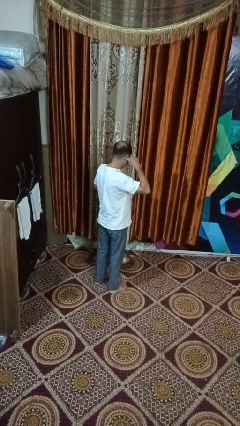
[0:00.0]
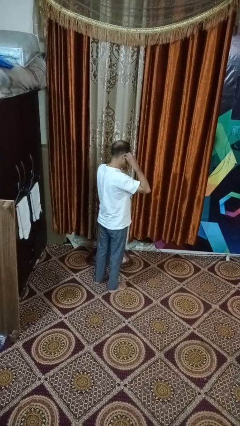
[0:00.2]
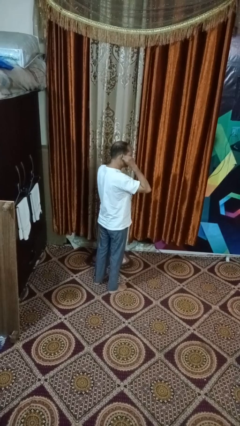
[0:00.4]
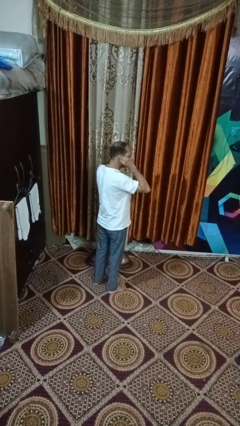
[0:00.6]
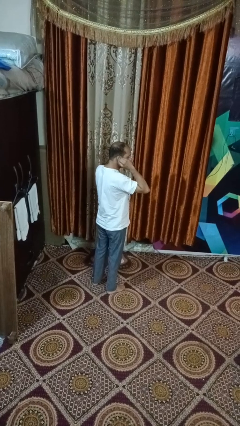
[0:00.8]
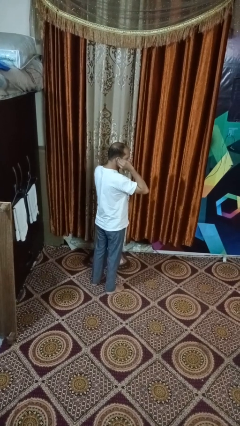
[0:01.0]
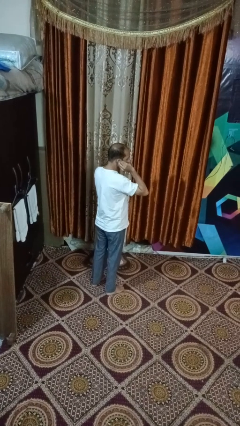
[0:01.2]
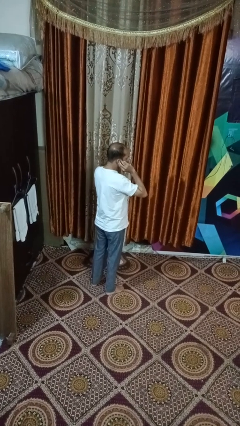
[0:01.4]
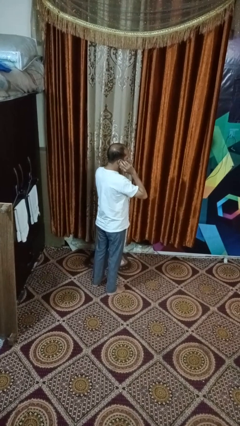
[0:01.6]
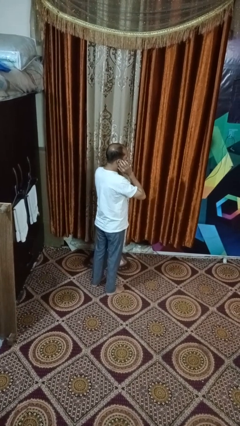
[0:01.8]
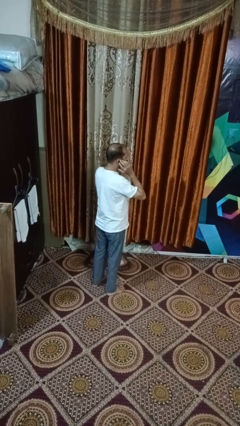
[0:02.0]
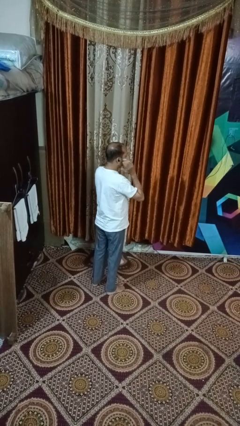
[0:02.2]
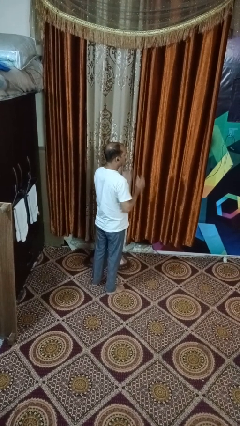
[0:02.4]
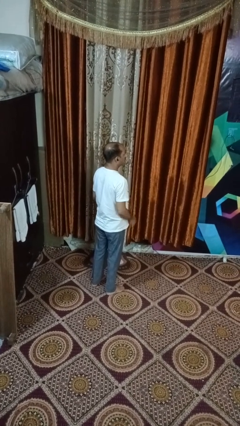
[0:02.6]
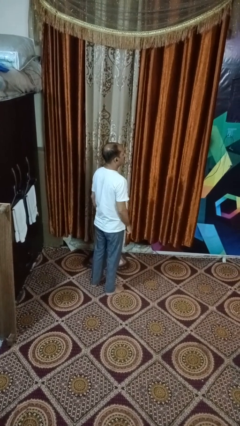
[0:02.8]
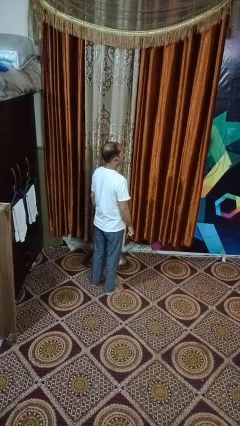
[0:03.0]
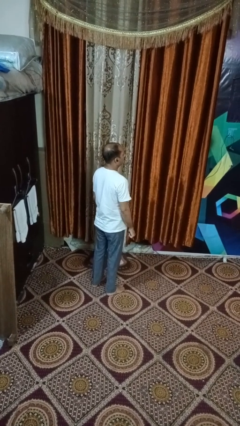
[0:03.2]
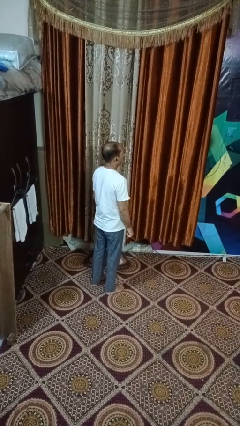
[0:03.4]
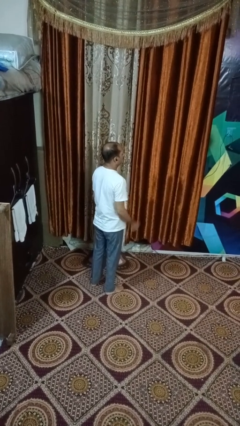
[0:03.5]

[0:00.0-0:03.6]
person puts on headphones

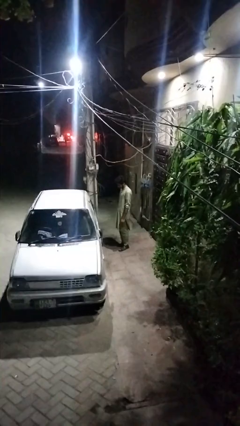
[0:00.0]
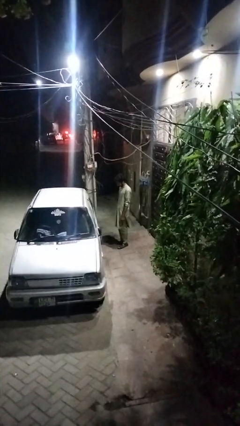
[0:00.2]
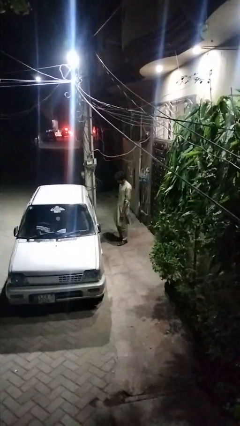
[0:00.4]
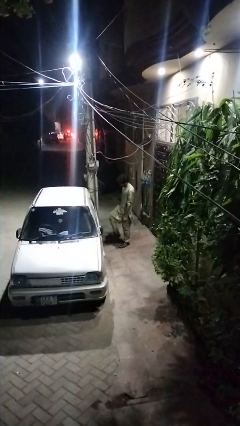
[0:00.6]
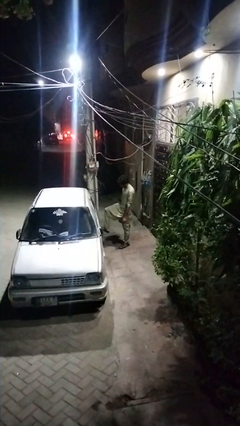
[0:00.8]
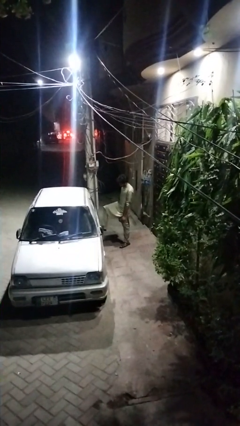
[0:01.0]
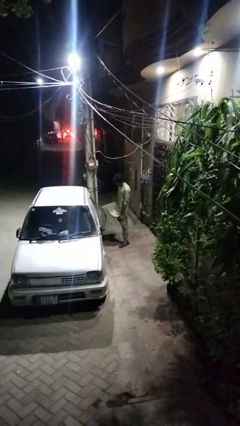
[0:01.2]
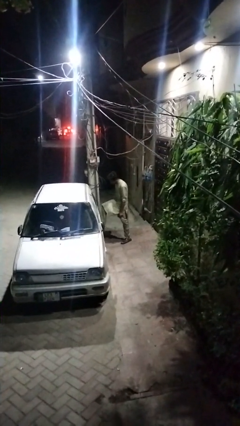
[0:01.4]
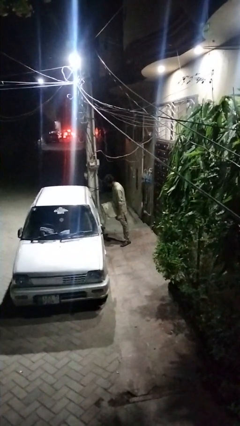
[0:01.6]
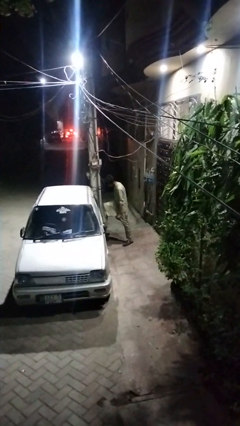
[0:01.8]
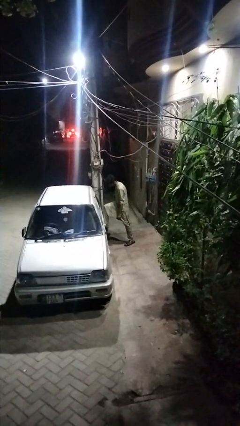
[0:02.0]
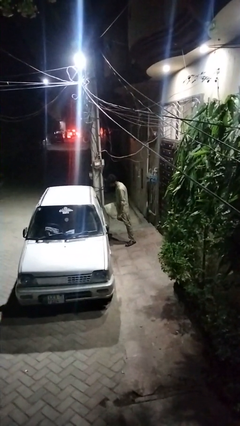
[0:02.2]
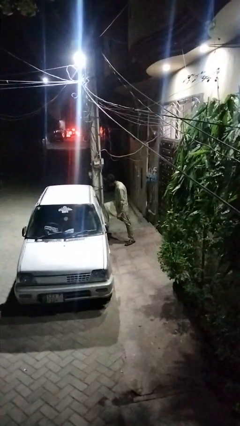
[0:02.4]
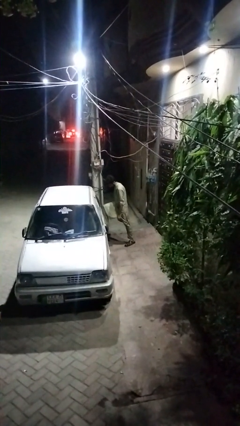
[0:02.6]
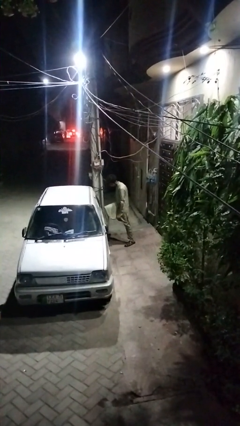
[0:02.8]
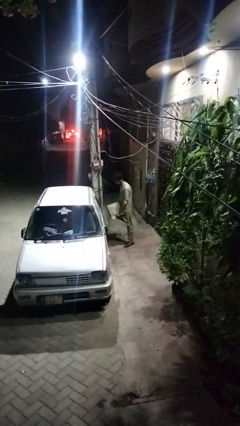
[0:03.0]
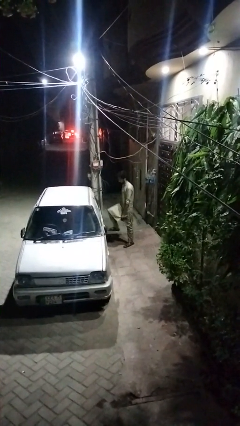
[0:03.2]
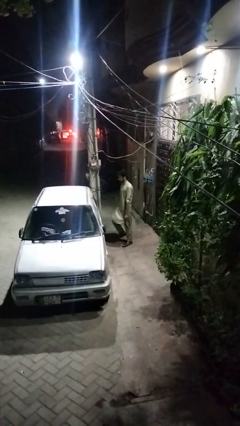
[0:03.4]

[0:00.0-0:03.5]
person kicks car tires

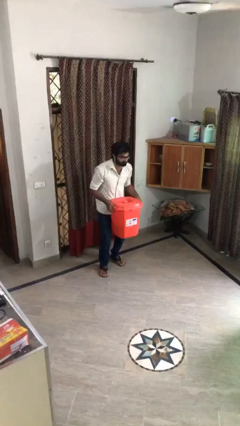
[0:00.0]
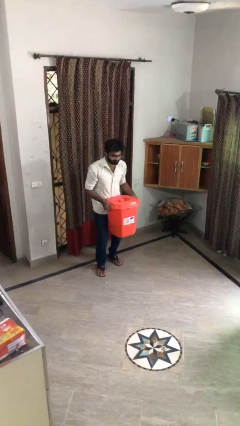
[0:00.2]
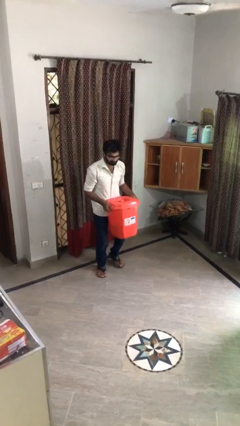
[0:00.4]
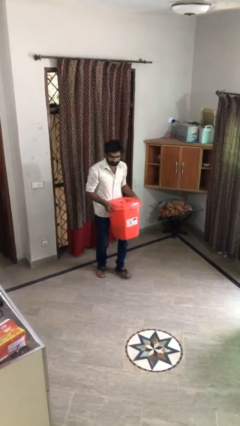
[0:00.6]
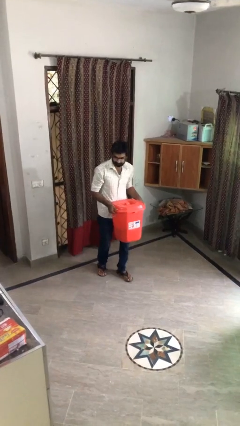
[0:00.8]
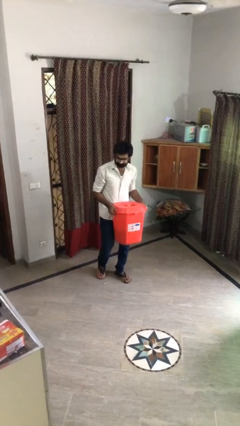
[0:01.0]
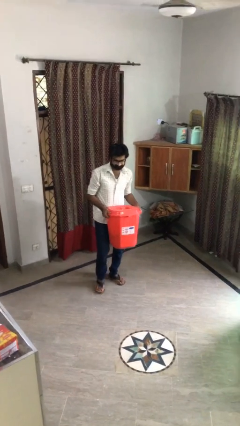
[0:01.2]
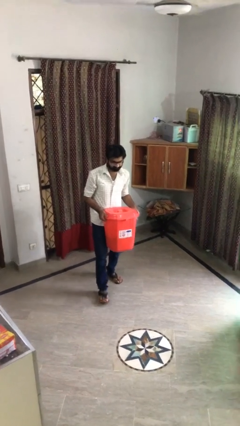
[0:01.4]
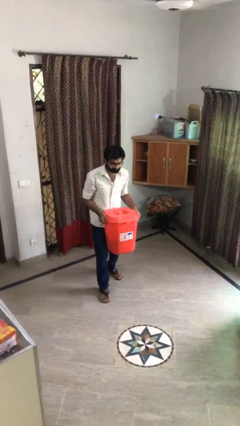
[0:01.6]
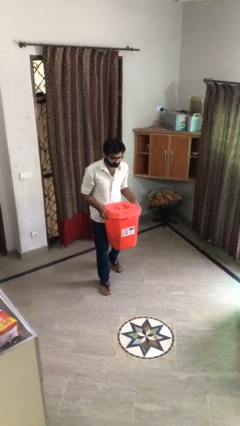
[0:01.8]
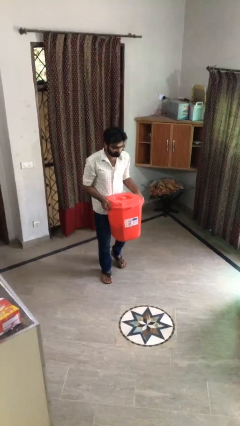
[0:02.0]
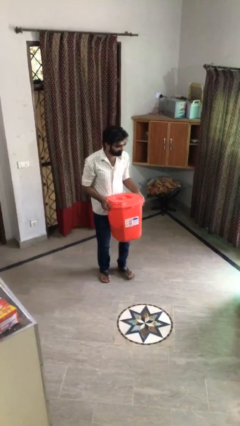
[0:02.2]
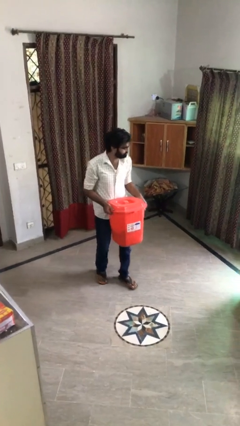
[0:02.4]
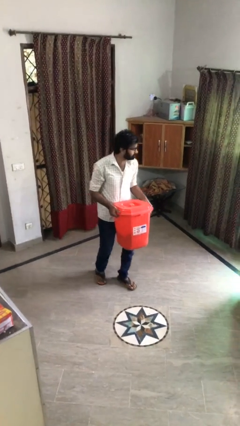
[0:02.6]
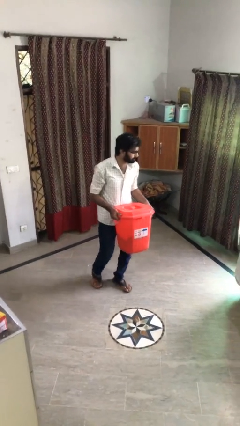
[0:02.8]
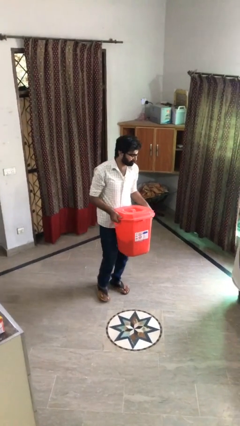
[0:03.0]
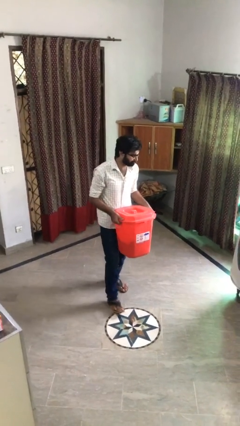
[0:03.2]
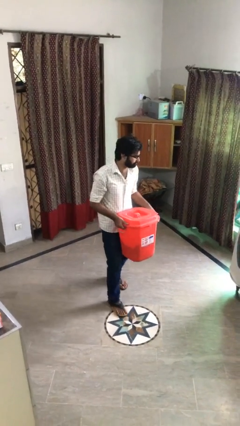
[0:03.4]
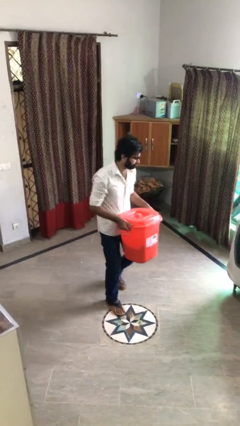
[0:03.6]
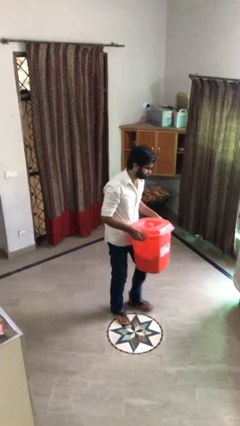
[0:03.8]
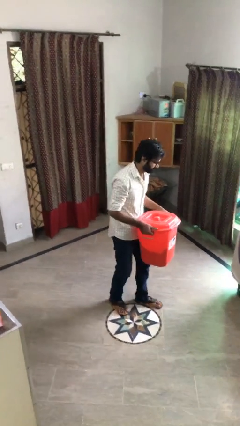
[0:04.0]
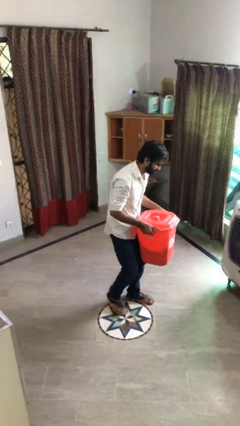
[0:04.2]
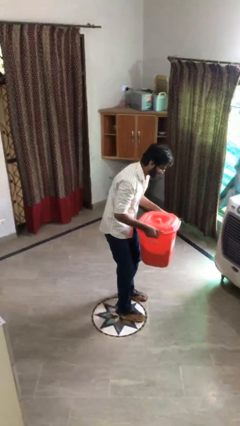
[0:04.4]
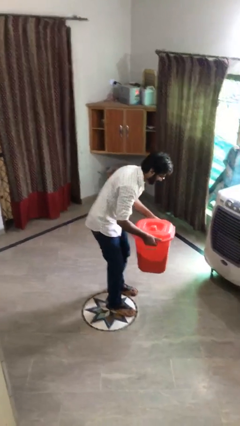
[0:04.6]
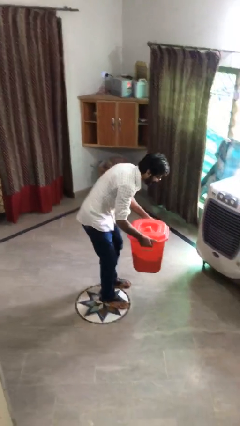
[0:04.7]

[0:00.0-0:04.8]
person carries heavy object

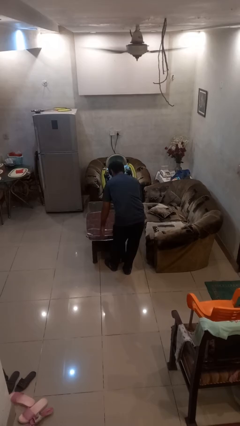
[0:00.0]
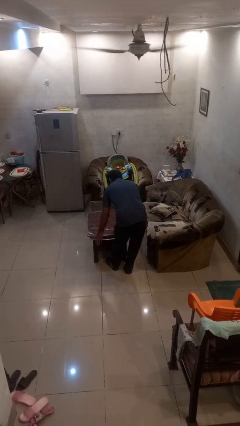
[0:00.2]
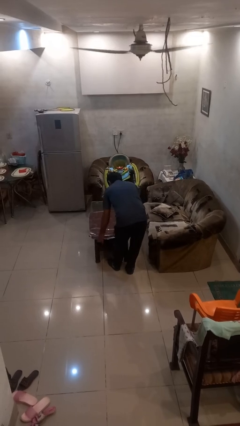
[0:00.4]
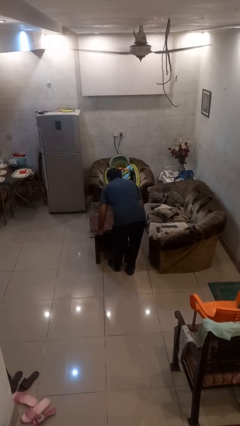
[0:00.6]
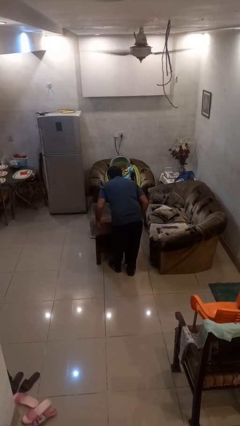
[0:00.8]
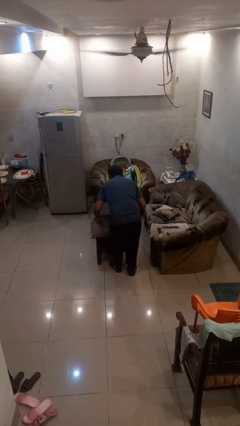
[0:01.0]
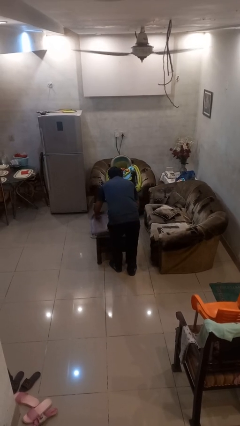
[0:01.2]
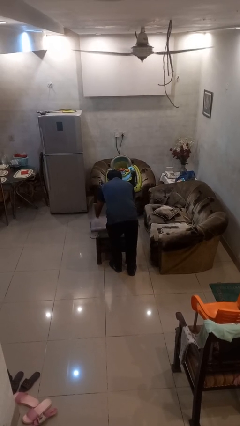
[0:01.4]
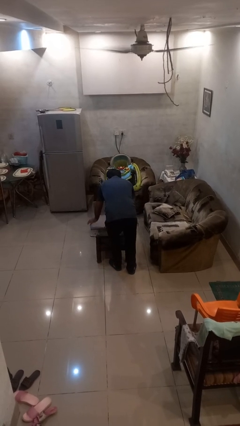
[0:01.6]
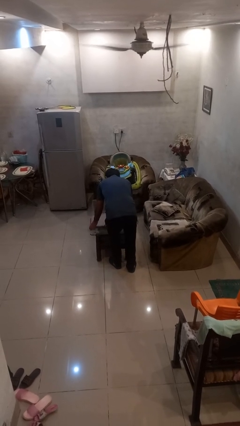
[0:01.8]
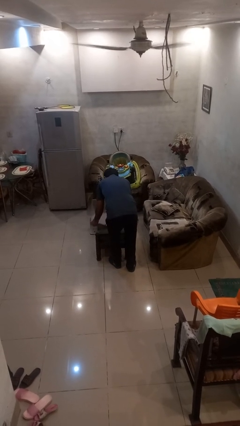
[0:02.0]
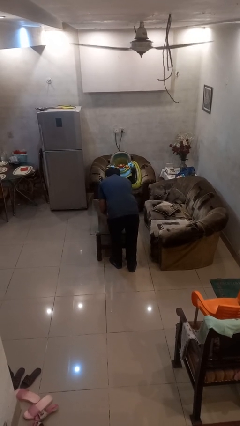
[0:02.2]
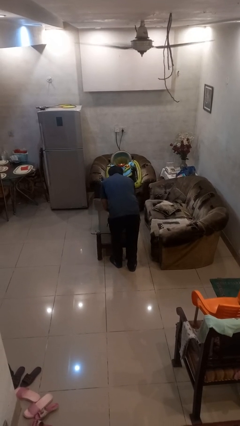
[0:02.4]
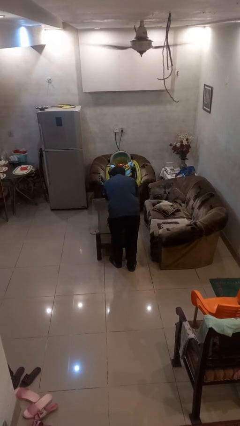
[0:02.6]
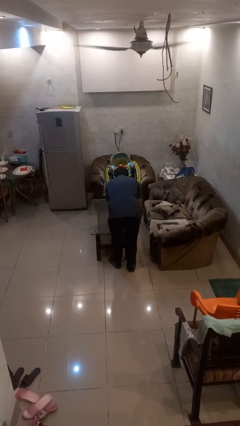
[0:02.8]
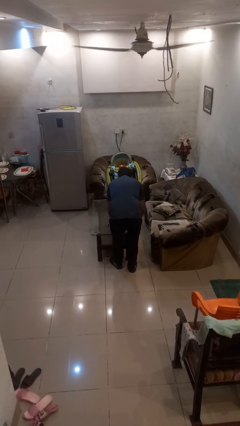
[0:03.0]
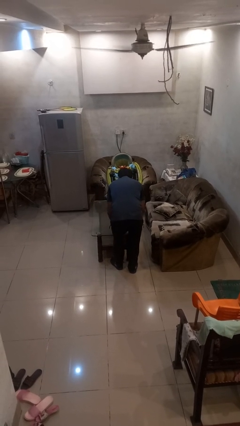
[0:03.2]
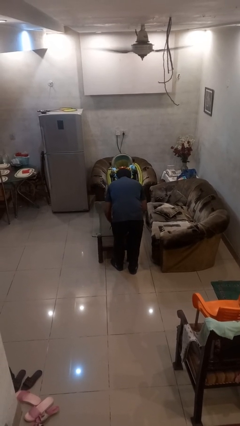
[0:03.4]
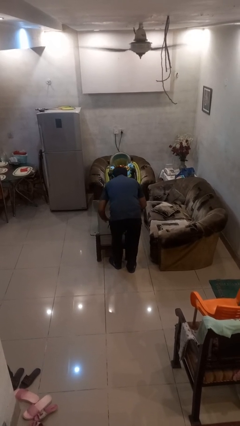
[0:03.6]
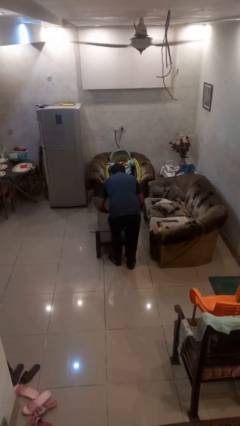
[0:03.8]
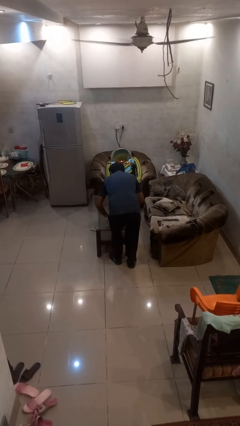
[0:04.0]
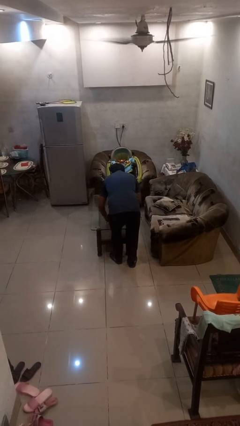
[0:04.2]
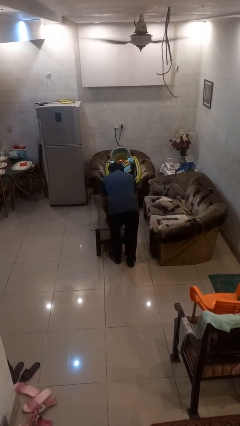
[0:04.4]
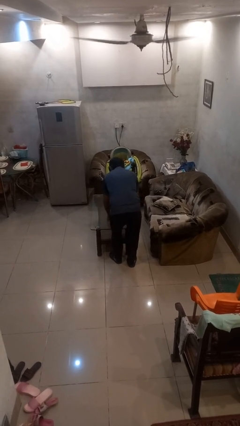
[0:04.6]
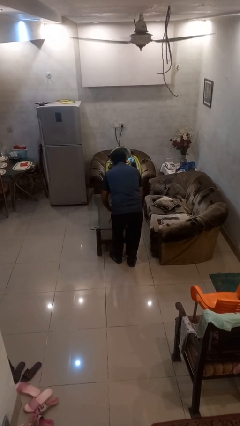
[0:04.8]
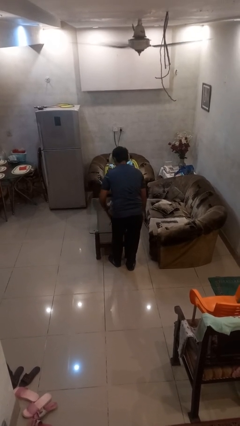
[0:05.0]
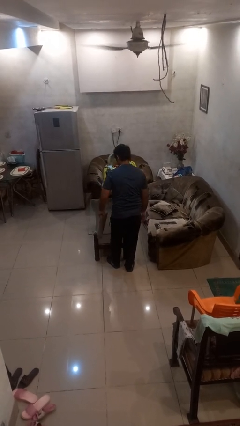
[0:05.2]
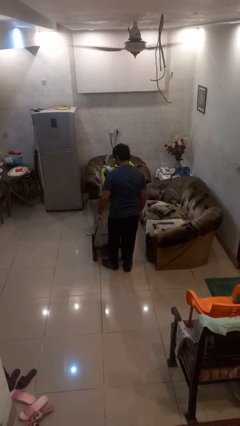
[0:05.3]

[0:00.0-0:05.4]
person folds tablecloth
